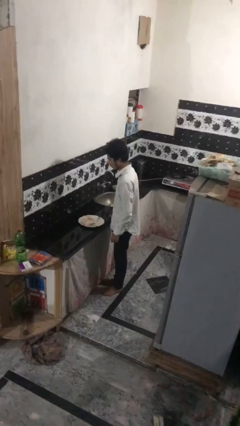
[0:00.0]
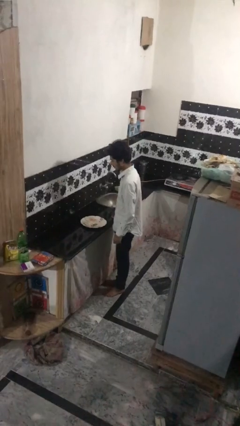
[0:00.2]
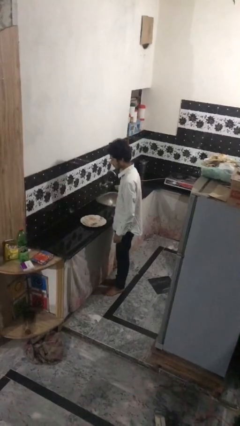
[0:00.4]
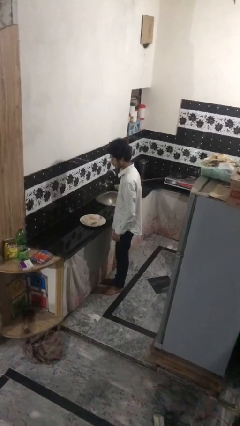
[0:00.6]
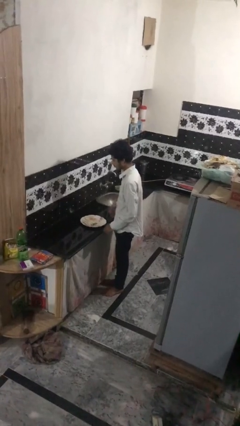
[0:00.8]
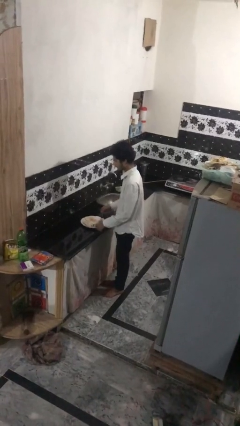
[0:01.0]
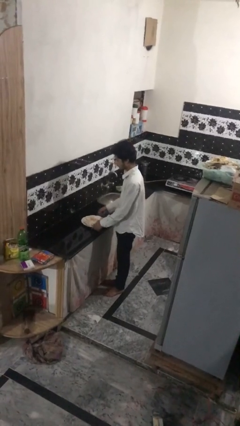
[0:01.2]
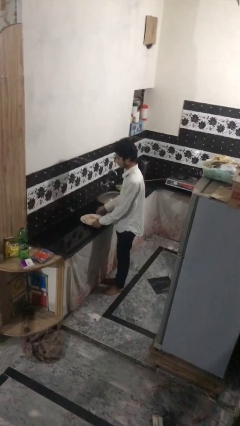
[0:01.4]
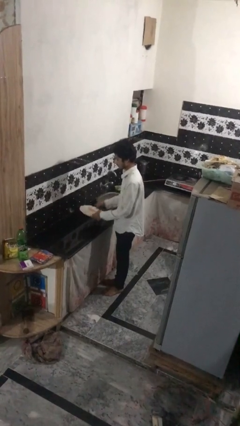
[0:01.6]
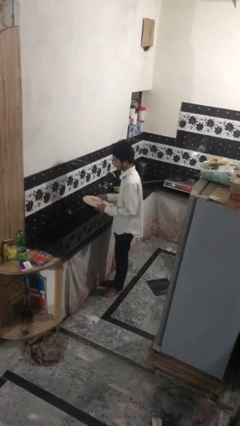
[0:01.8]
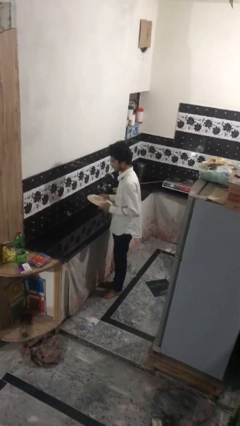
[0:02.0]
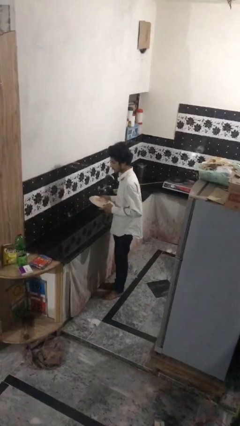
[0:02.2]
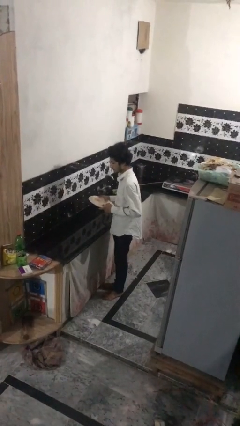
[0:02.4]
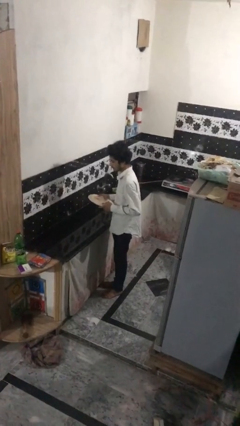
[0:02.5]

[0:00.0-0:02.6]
person picks up object from countertop

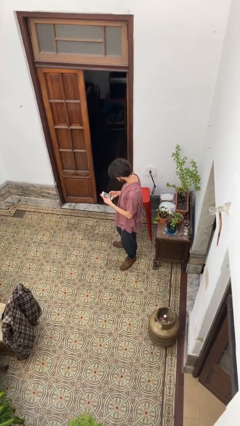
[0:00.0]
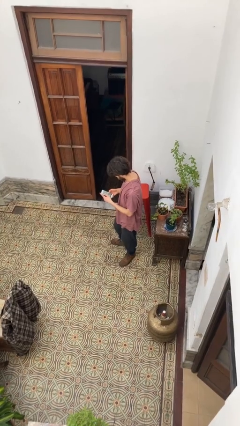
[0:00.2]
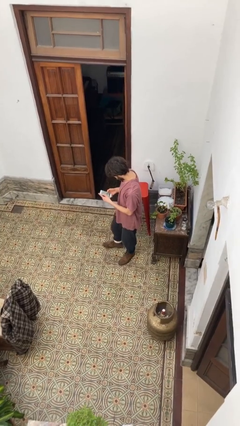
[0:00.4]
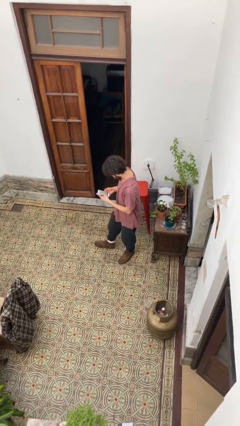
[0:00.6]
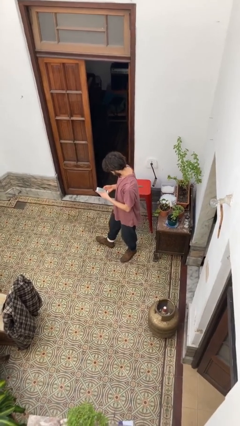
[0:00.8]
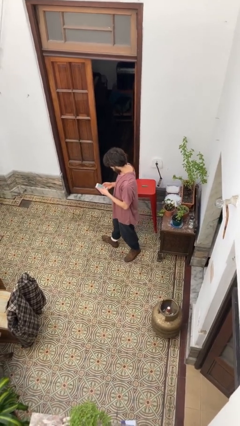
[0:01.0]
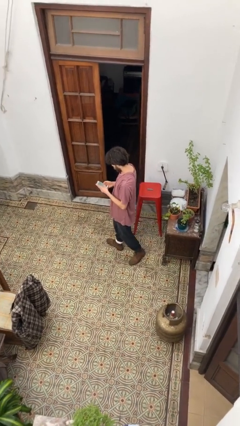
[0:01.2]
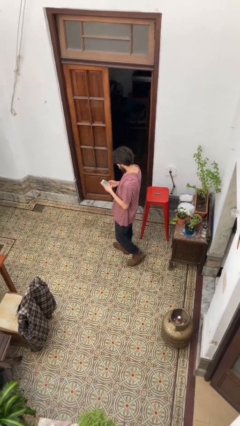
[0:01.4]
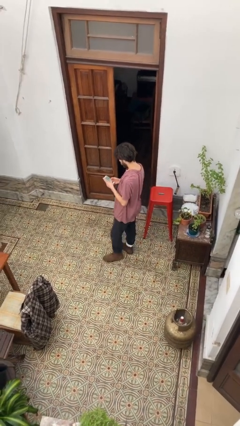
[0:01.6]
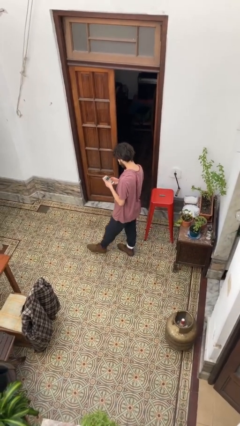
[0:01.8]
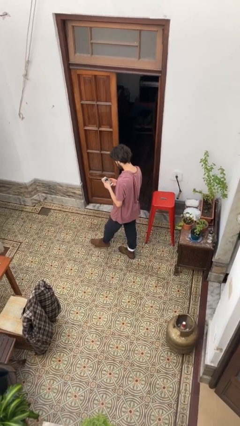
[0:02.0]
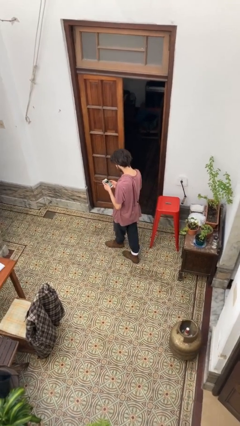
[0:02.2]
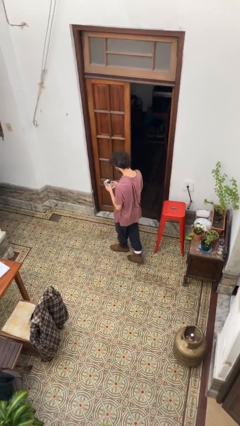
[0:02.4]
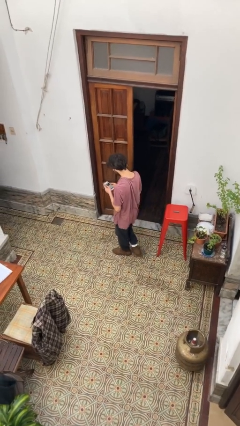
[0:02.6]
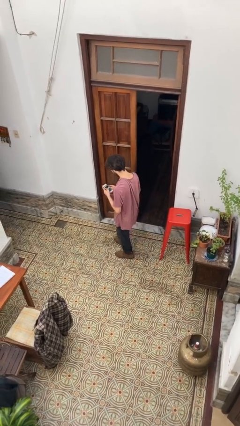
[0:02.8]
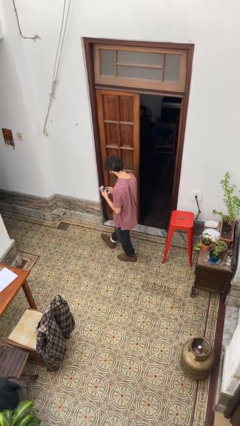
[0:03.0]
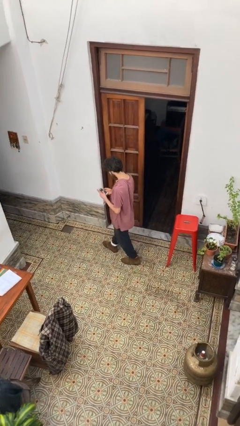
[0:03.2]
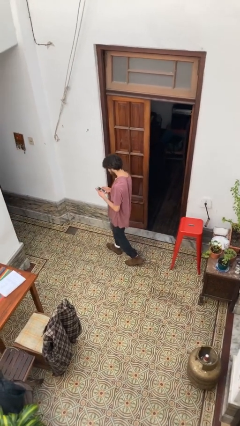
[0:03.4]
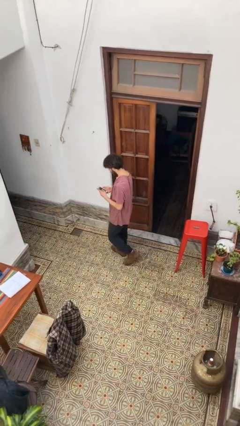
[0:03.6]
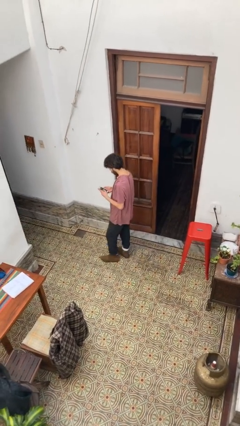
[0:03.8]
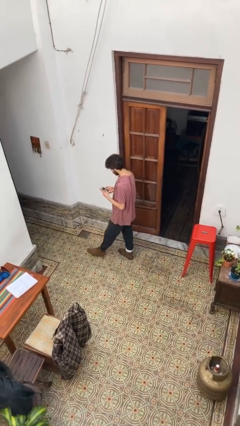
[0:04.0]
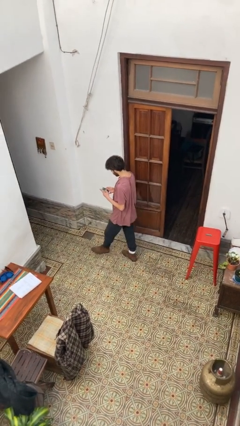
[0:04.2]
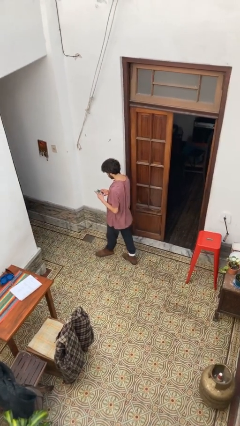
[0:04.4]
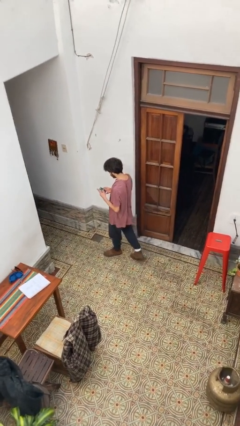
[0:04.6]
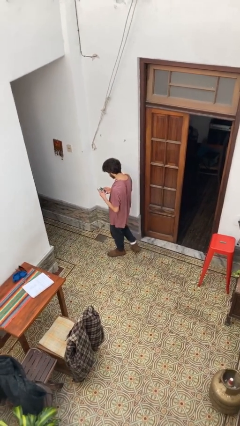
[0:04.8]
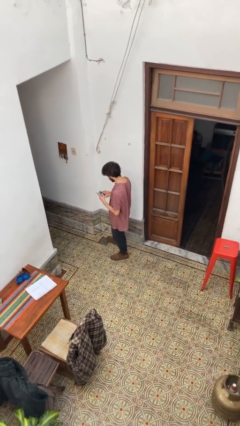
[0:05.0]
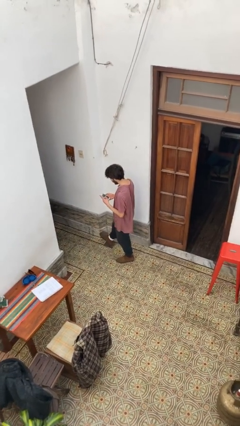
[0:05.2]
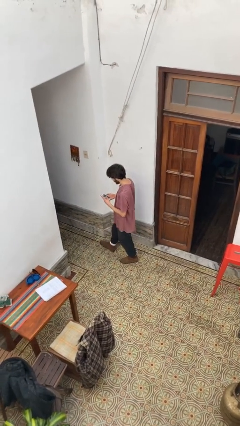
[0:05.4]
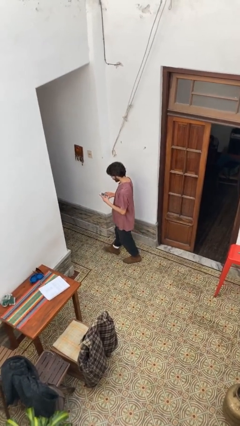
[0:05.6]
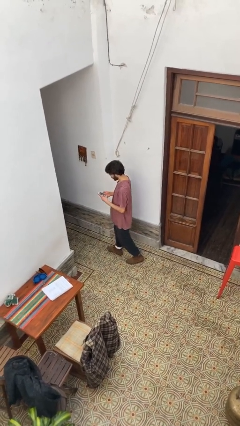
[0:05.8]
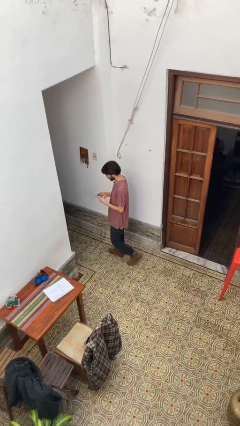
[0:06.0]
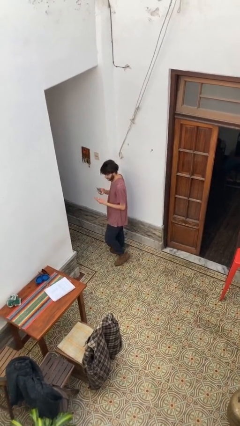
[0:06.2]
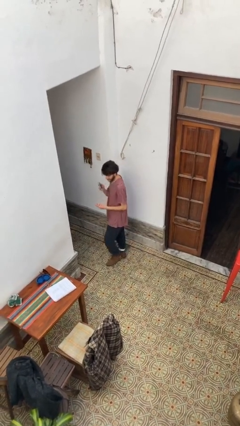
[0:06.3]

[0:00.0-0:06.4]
person texts on phone

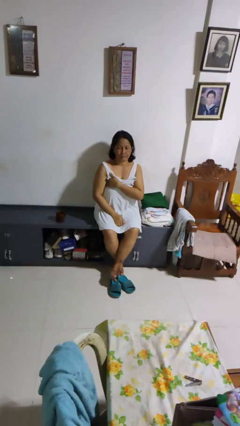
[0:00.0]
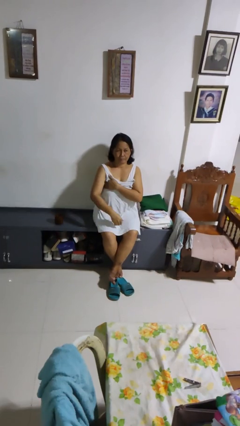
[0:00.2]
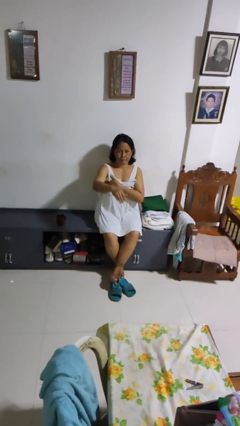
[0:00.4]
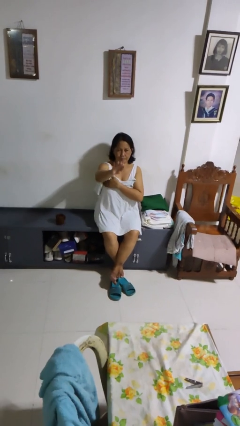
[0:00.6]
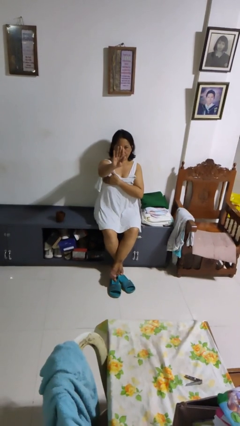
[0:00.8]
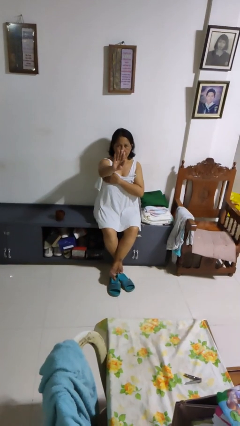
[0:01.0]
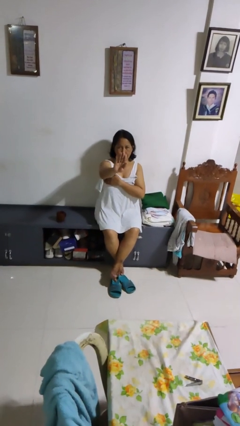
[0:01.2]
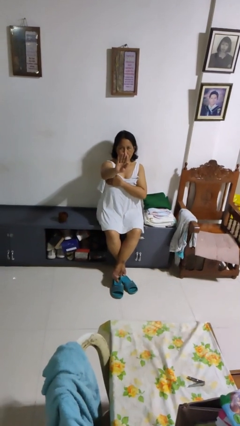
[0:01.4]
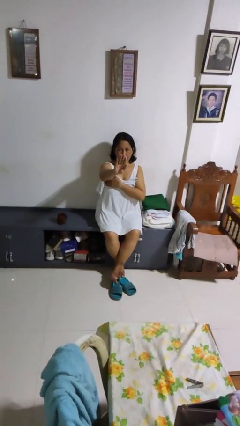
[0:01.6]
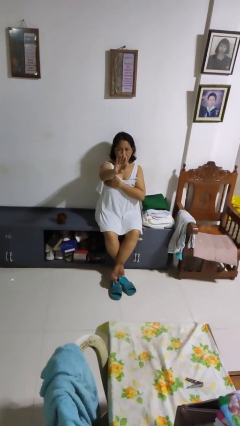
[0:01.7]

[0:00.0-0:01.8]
person gestures stop

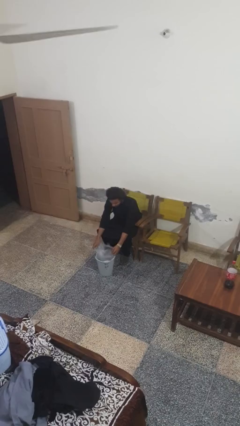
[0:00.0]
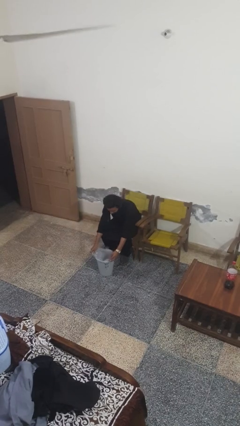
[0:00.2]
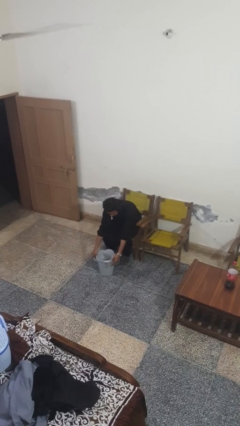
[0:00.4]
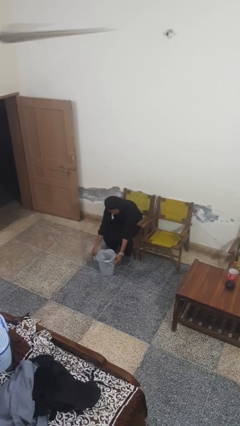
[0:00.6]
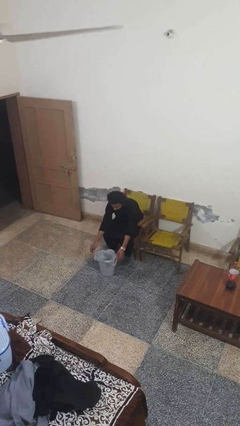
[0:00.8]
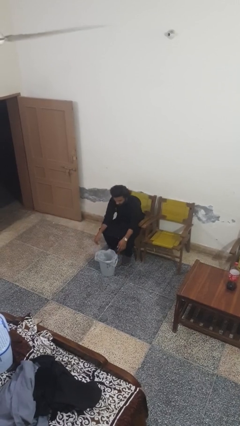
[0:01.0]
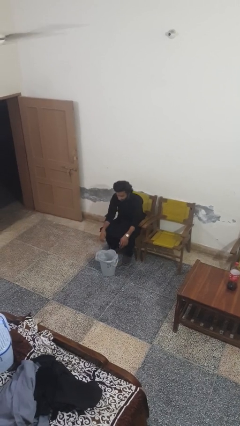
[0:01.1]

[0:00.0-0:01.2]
person inserts trashbag into trashcan

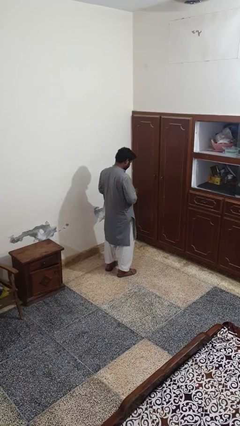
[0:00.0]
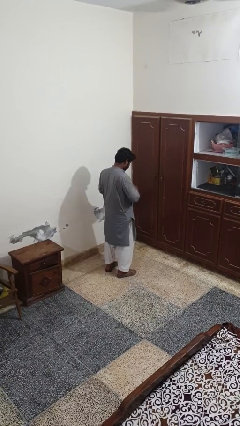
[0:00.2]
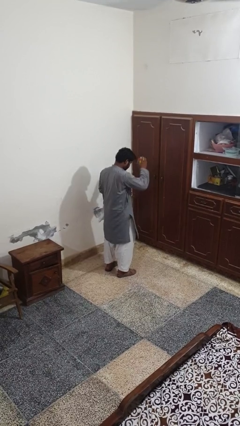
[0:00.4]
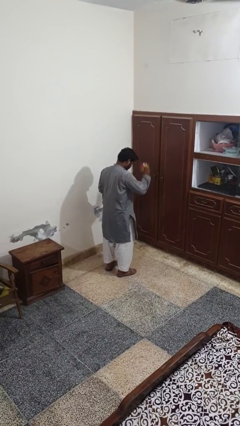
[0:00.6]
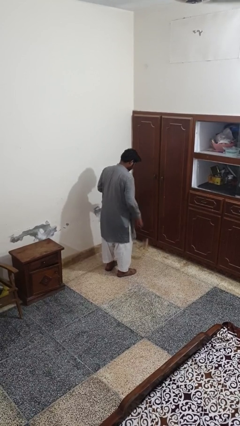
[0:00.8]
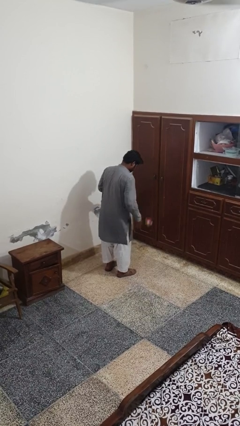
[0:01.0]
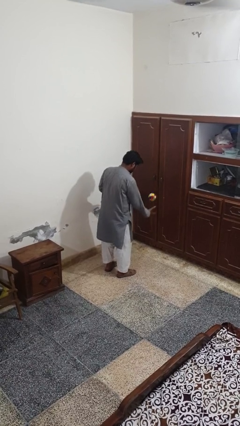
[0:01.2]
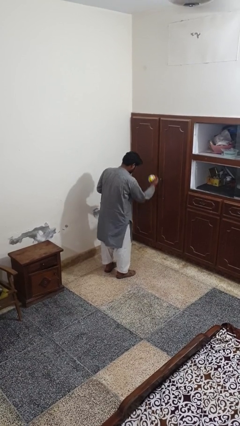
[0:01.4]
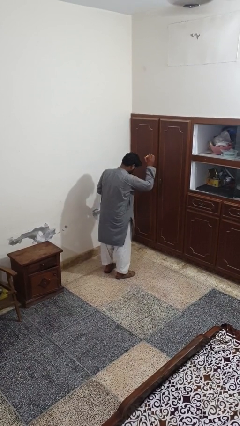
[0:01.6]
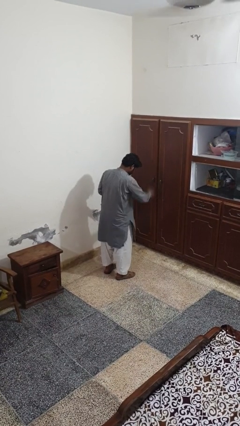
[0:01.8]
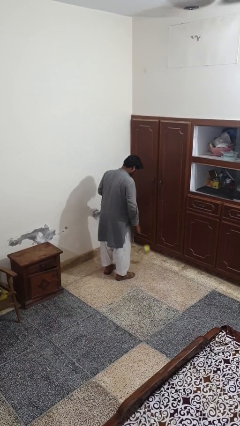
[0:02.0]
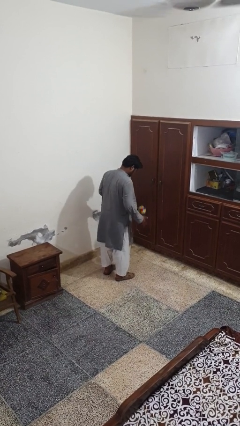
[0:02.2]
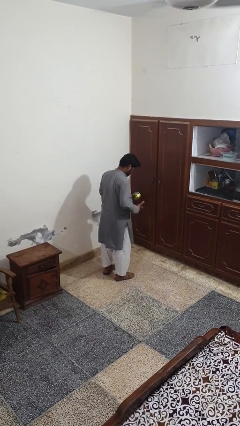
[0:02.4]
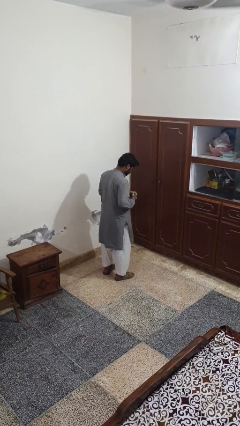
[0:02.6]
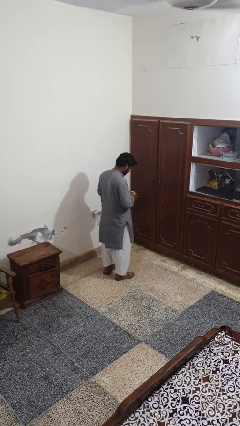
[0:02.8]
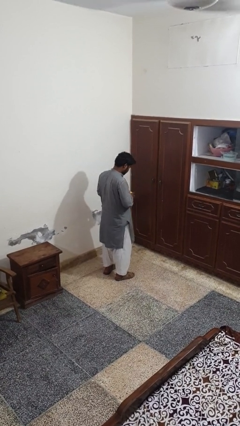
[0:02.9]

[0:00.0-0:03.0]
person bounces ball on floor

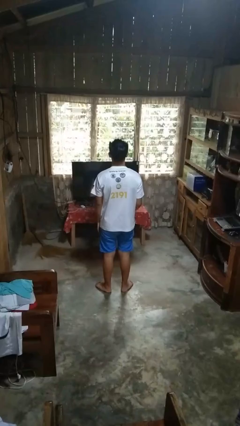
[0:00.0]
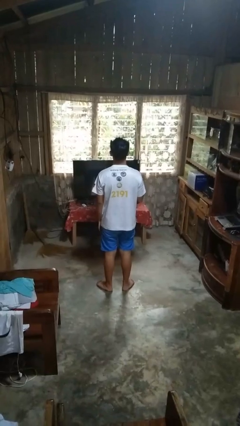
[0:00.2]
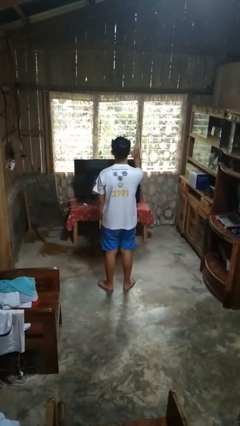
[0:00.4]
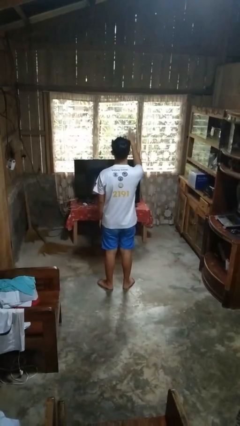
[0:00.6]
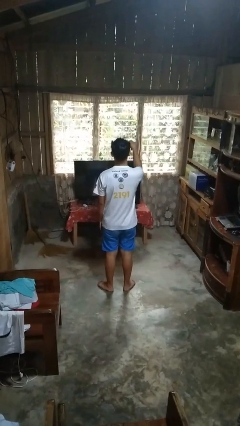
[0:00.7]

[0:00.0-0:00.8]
person gestures come here

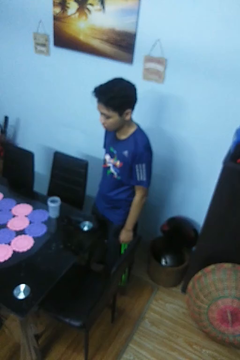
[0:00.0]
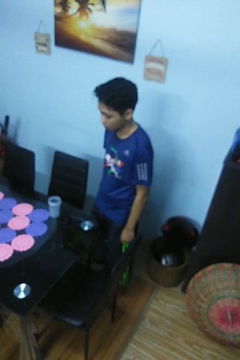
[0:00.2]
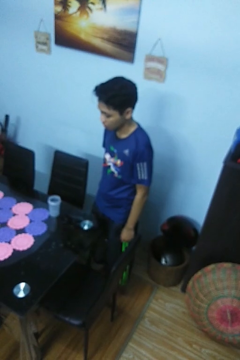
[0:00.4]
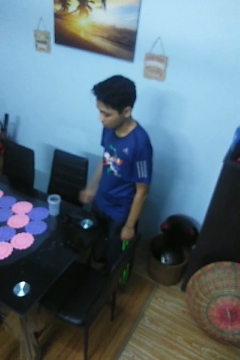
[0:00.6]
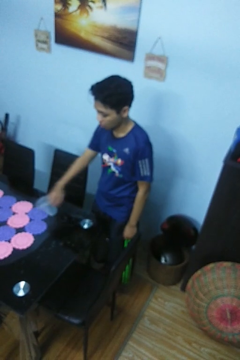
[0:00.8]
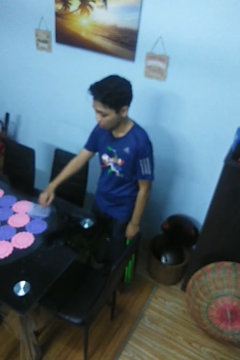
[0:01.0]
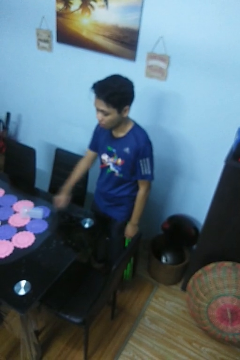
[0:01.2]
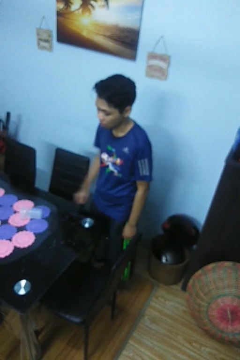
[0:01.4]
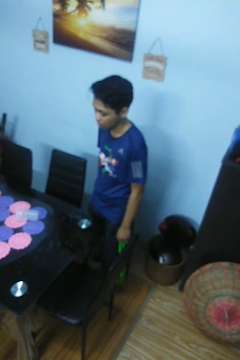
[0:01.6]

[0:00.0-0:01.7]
person knocks over glass
